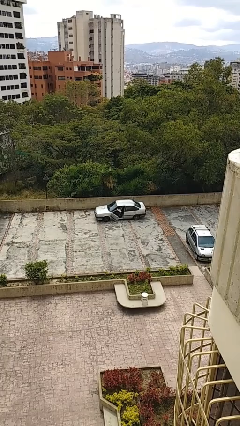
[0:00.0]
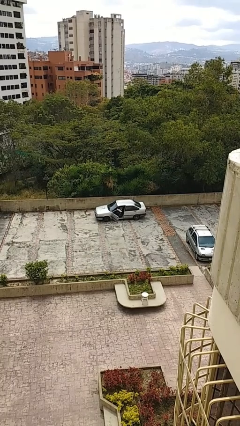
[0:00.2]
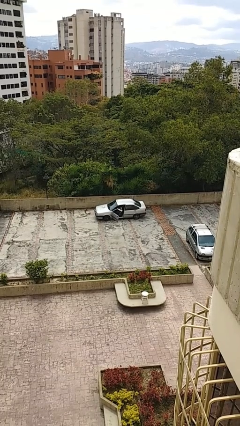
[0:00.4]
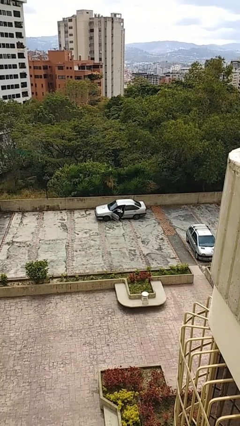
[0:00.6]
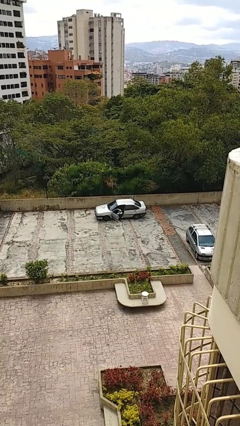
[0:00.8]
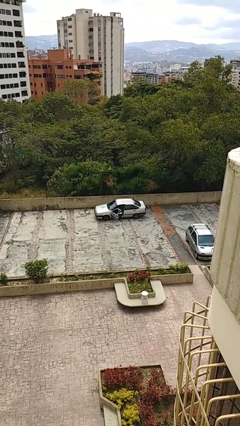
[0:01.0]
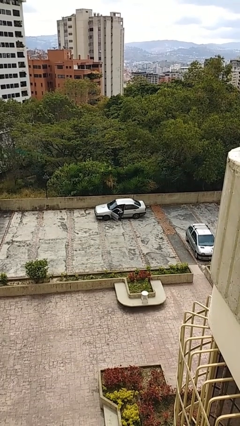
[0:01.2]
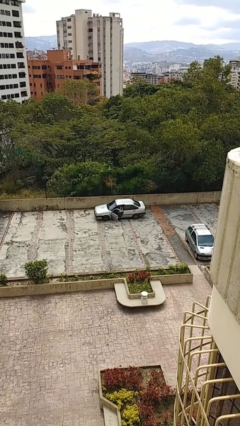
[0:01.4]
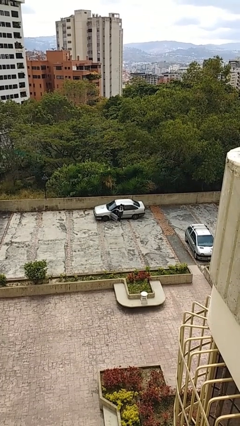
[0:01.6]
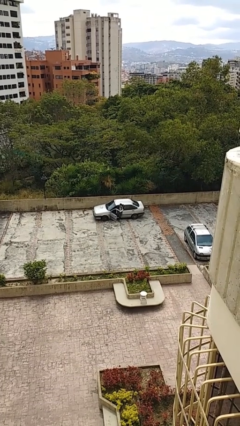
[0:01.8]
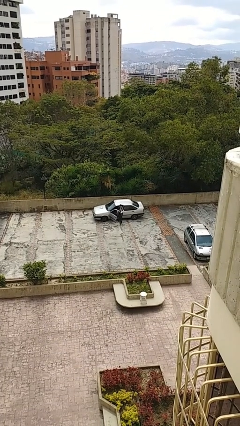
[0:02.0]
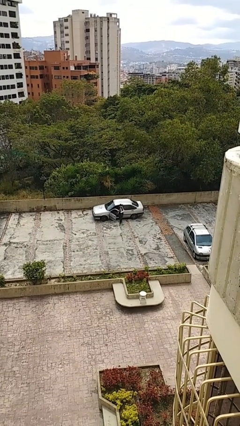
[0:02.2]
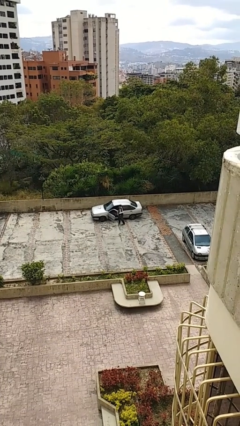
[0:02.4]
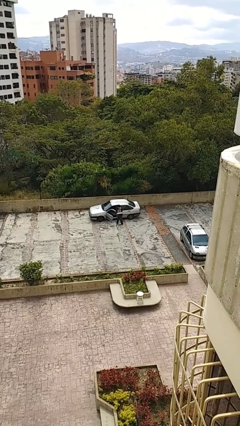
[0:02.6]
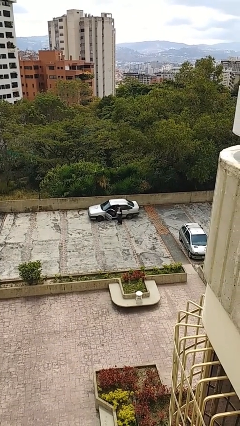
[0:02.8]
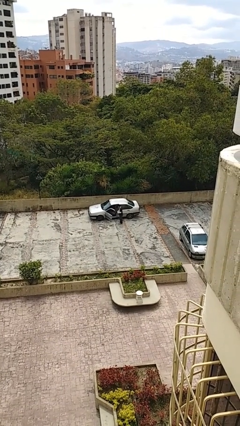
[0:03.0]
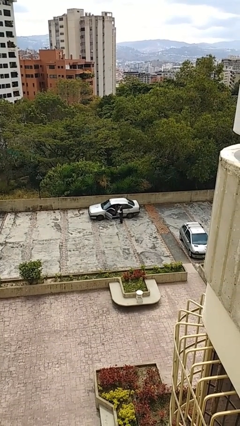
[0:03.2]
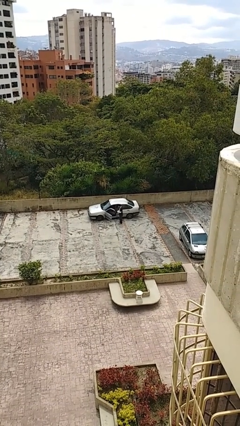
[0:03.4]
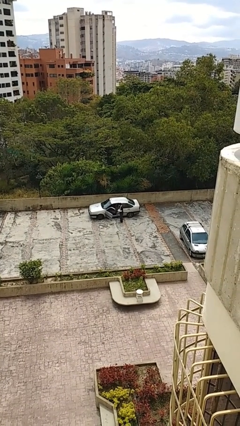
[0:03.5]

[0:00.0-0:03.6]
person exits car

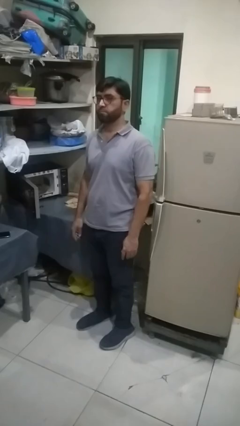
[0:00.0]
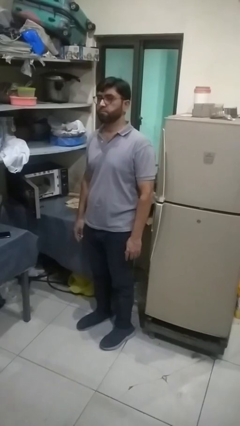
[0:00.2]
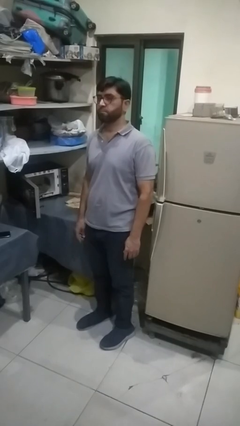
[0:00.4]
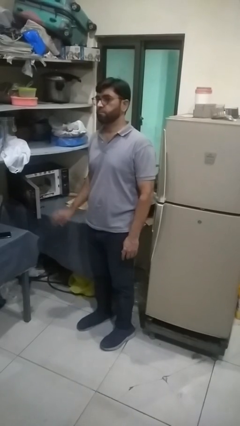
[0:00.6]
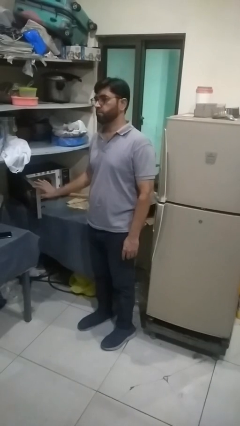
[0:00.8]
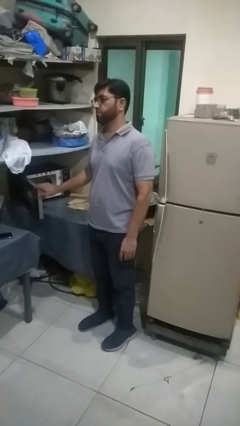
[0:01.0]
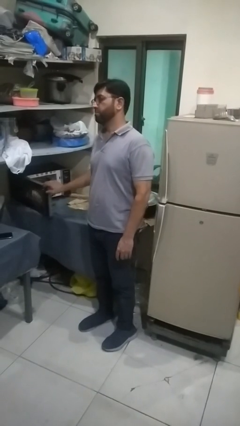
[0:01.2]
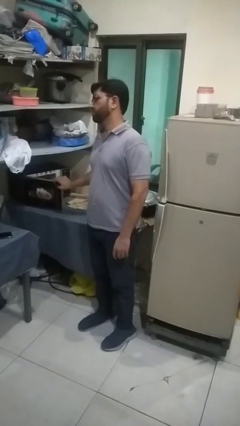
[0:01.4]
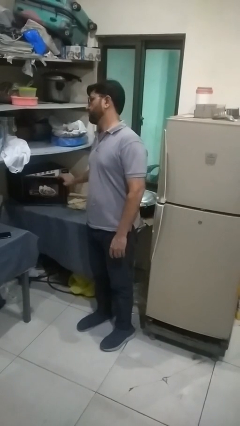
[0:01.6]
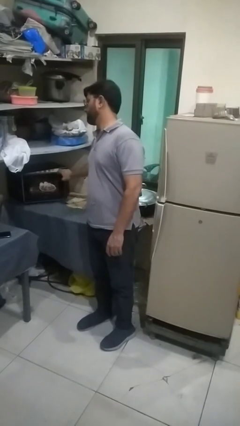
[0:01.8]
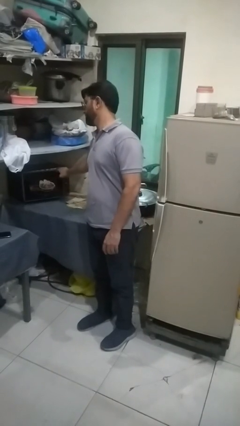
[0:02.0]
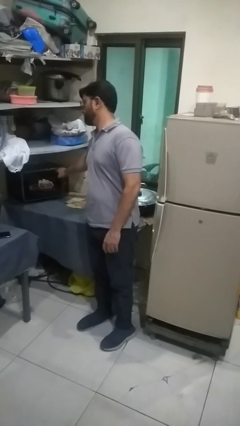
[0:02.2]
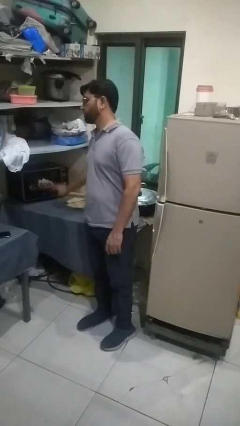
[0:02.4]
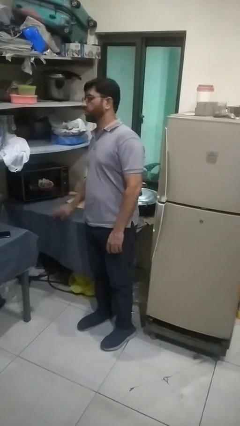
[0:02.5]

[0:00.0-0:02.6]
person closes oven door

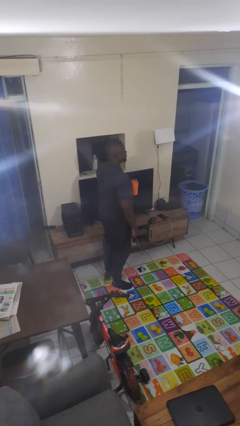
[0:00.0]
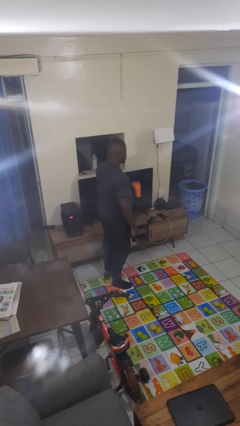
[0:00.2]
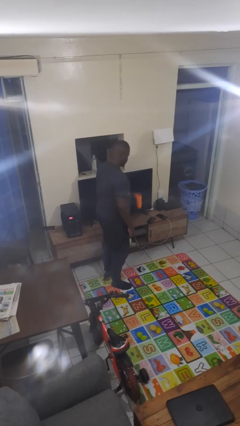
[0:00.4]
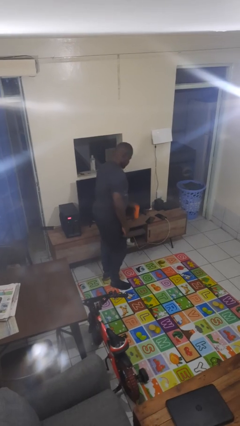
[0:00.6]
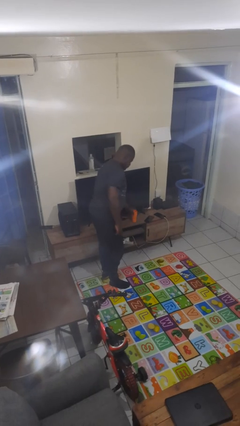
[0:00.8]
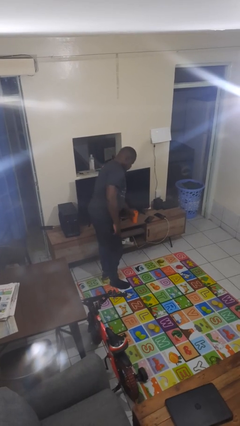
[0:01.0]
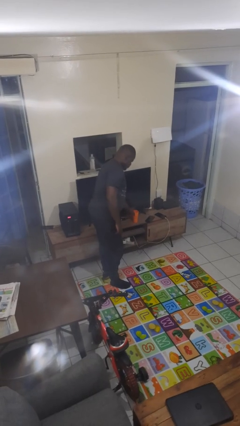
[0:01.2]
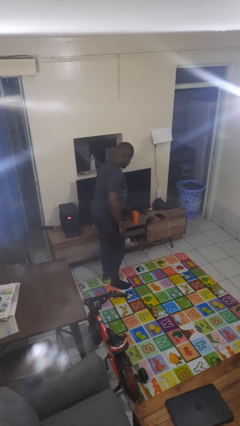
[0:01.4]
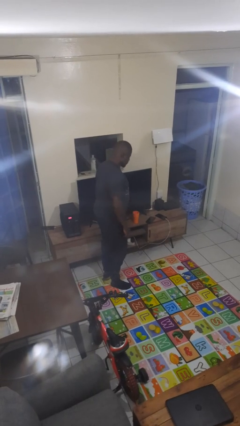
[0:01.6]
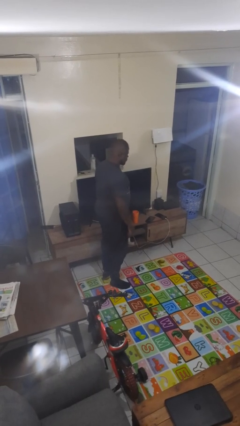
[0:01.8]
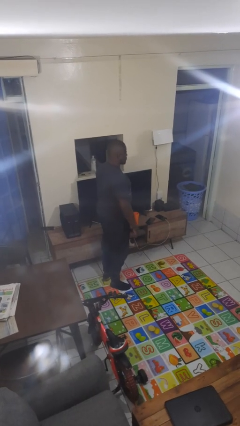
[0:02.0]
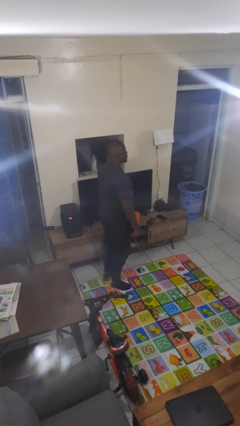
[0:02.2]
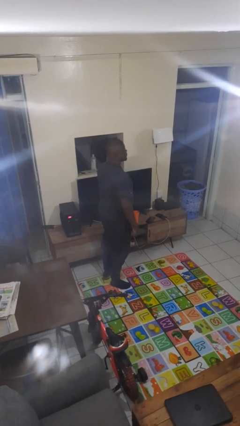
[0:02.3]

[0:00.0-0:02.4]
person puts down object on countertop

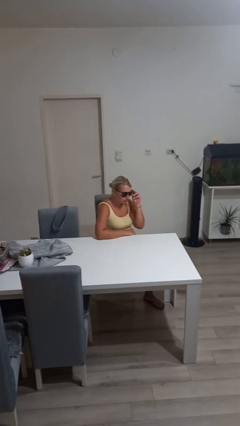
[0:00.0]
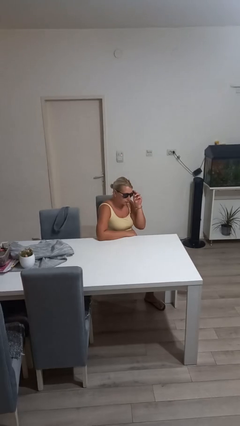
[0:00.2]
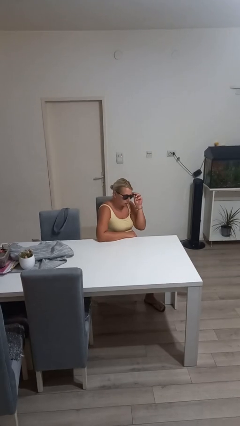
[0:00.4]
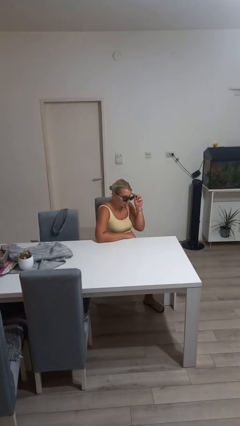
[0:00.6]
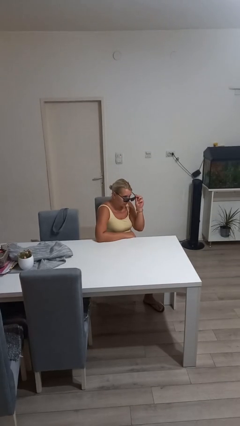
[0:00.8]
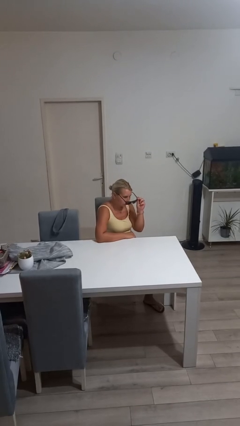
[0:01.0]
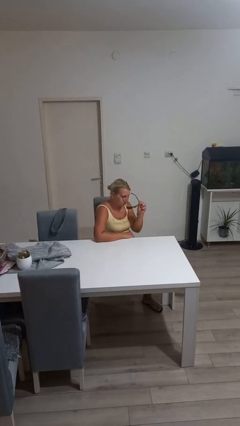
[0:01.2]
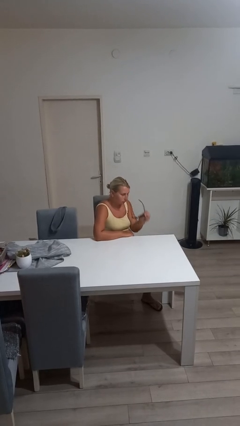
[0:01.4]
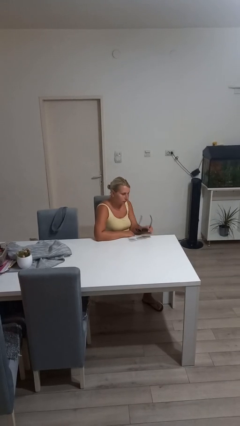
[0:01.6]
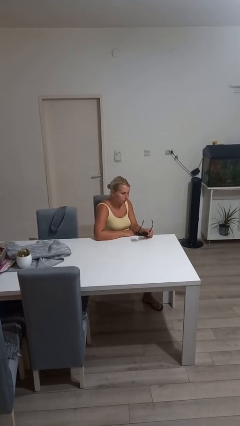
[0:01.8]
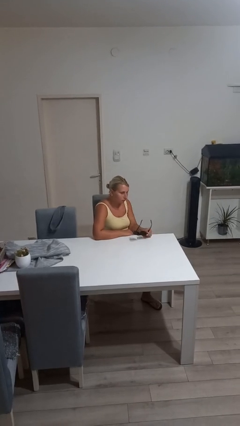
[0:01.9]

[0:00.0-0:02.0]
person takes off sunglasses

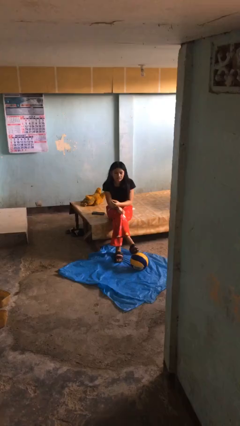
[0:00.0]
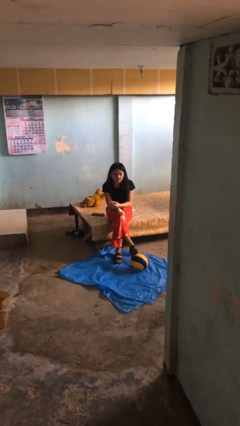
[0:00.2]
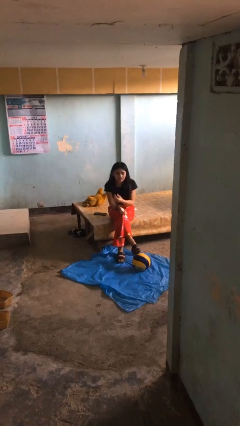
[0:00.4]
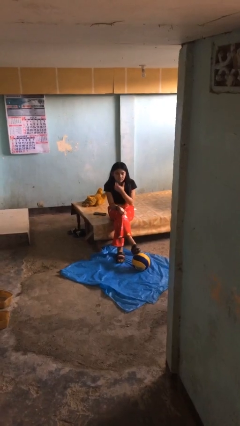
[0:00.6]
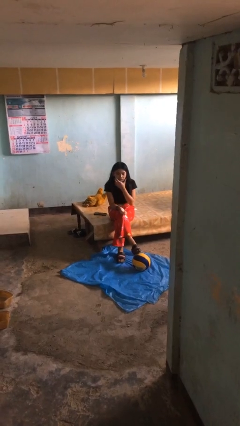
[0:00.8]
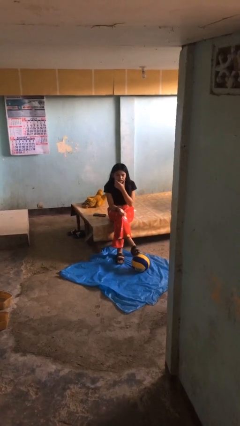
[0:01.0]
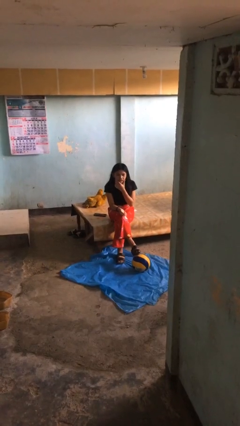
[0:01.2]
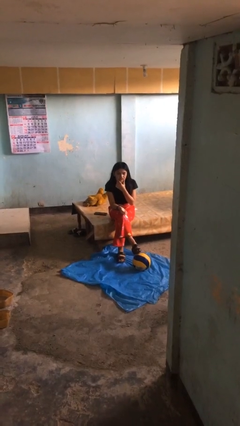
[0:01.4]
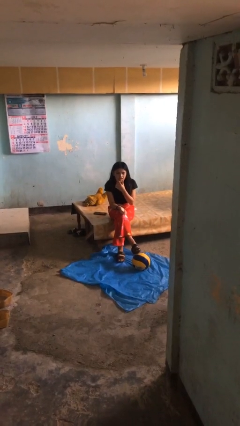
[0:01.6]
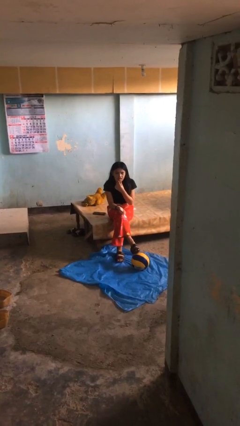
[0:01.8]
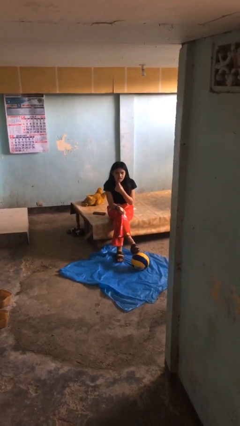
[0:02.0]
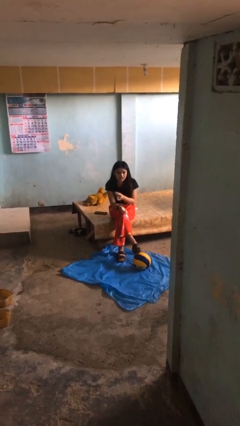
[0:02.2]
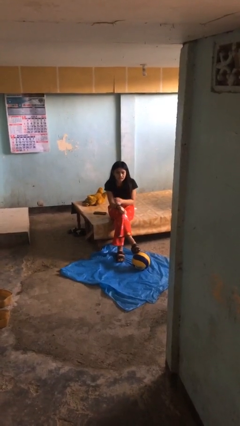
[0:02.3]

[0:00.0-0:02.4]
person strokes chin

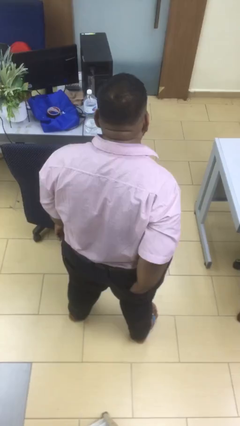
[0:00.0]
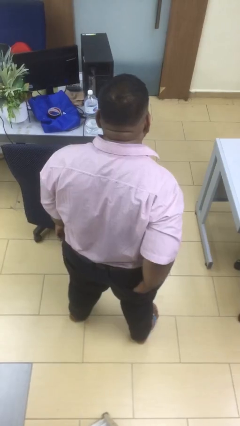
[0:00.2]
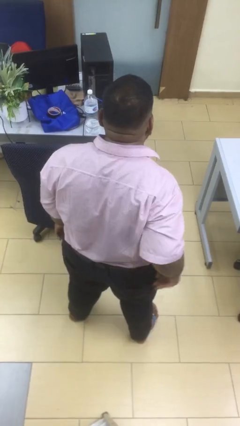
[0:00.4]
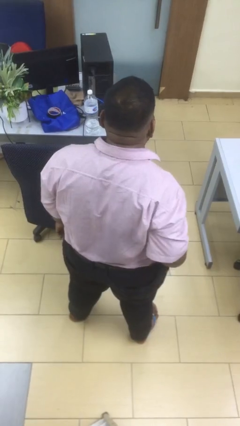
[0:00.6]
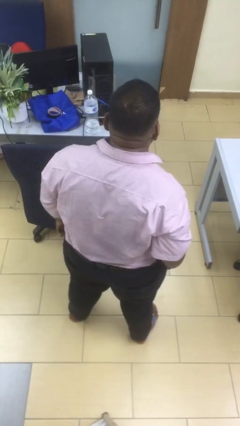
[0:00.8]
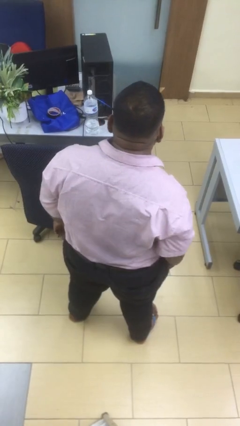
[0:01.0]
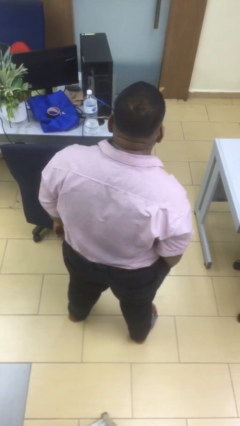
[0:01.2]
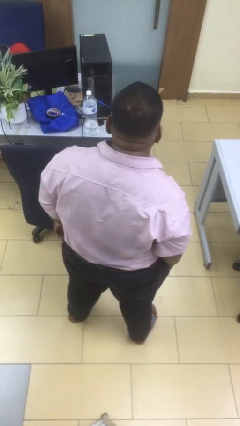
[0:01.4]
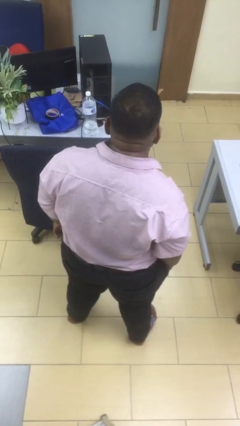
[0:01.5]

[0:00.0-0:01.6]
person puts hands in back pockets

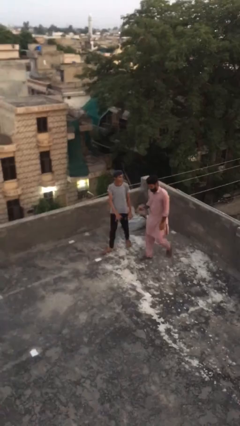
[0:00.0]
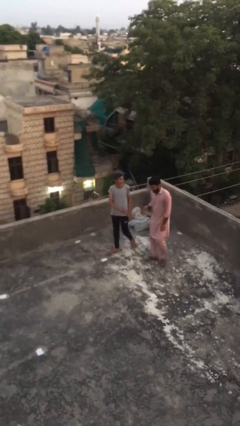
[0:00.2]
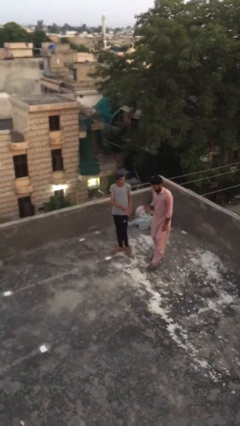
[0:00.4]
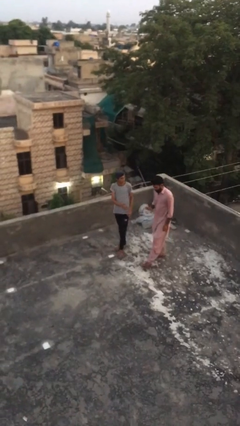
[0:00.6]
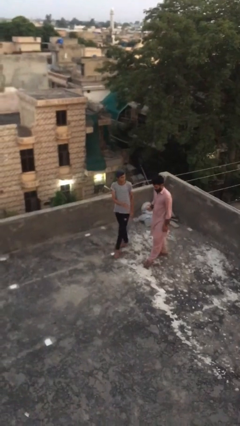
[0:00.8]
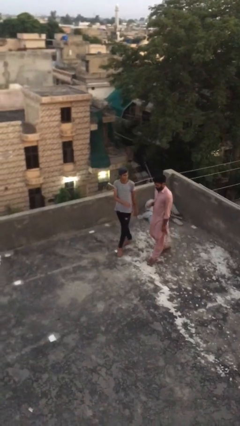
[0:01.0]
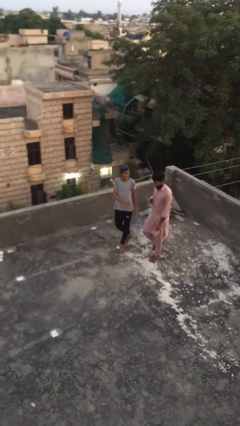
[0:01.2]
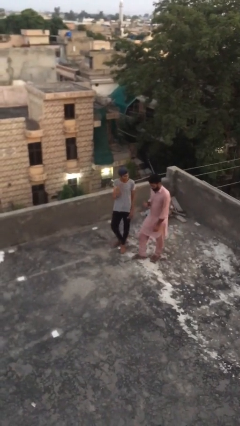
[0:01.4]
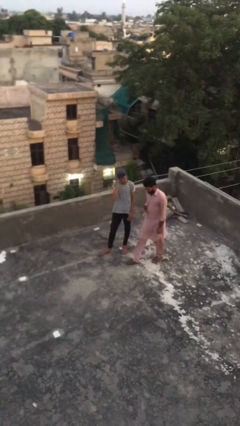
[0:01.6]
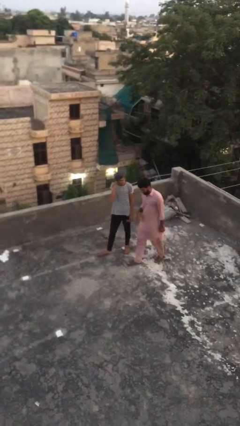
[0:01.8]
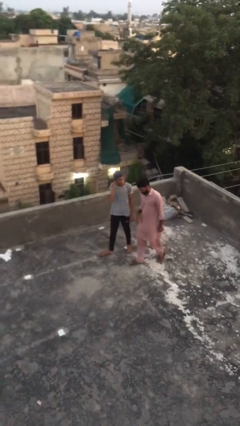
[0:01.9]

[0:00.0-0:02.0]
person talks to person

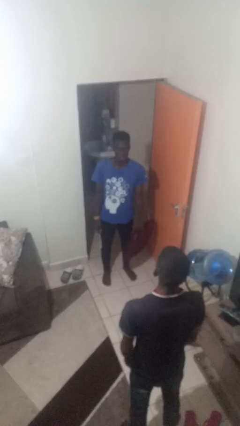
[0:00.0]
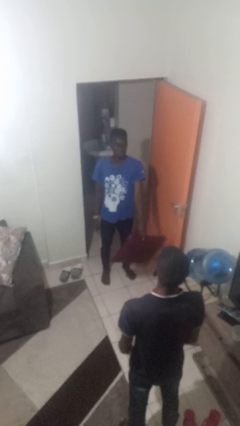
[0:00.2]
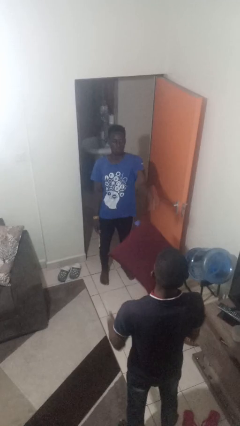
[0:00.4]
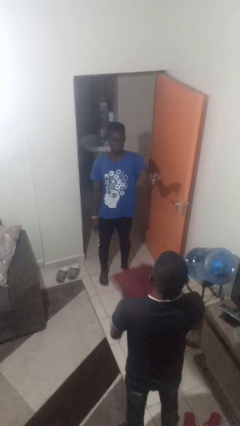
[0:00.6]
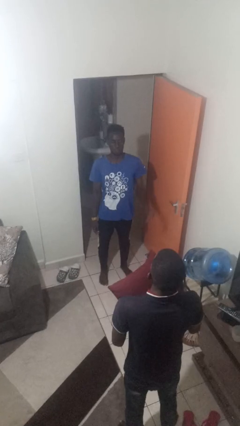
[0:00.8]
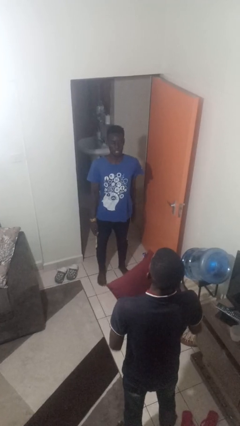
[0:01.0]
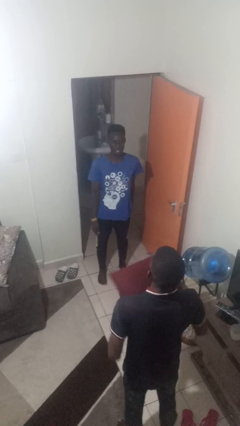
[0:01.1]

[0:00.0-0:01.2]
person throws object to person
